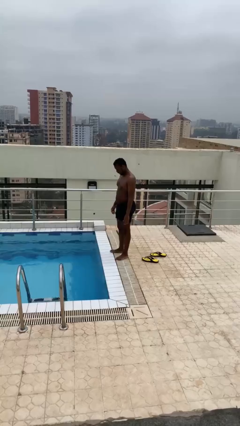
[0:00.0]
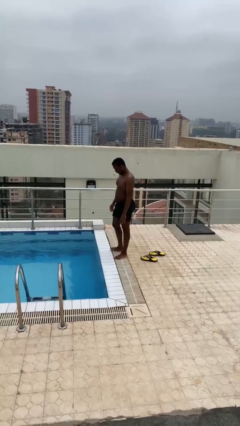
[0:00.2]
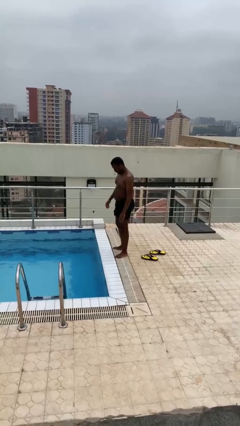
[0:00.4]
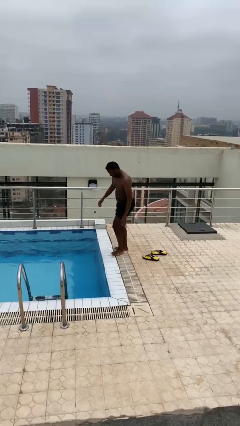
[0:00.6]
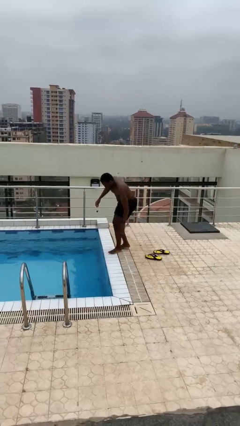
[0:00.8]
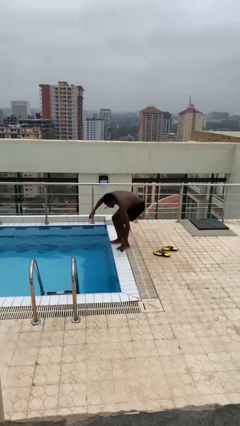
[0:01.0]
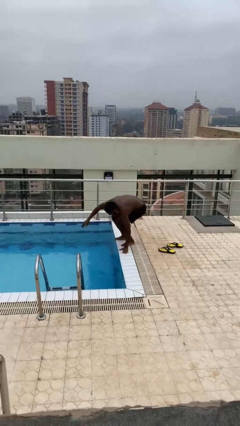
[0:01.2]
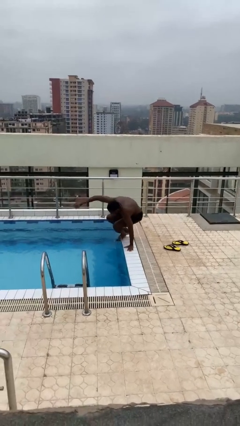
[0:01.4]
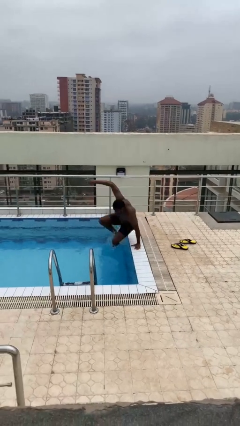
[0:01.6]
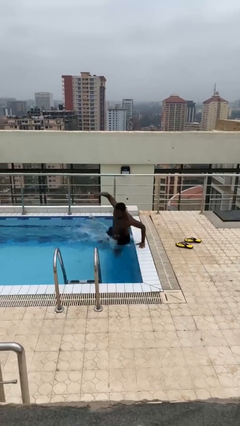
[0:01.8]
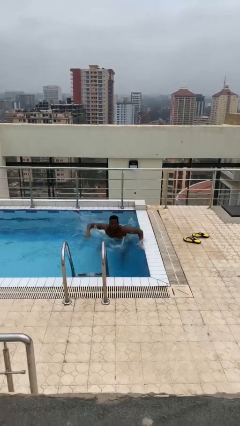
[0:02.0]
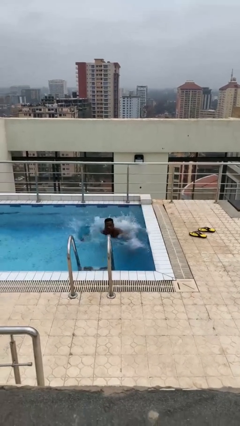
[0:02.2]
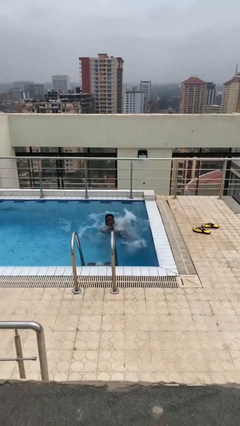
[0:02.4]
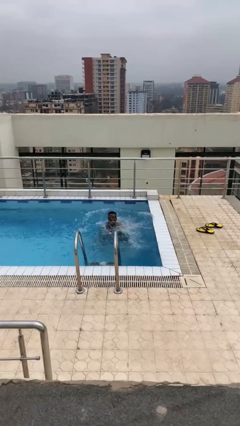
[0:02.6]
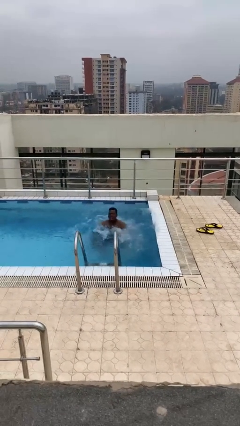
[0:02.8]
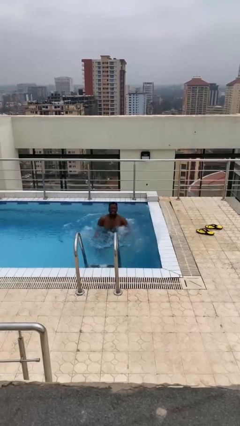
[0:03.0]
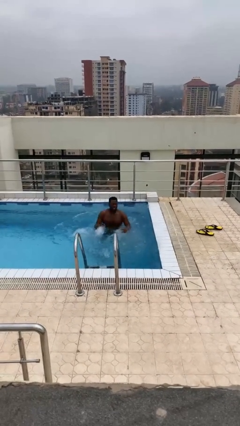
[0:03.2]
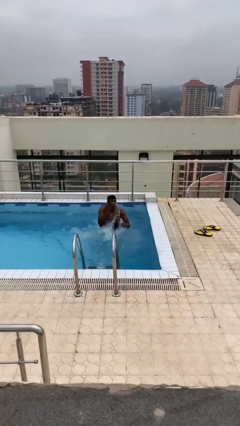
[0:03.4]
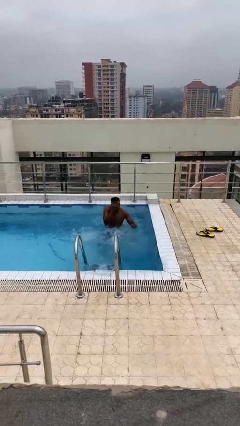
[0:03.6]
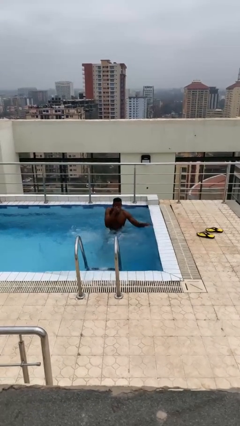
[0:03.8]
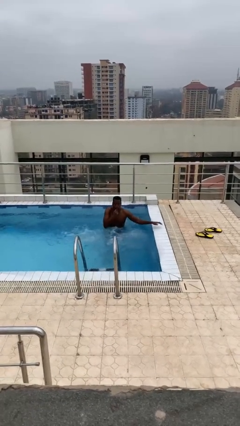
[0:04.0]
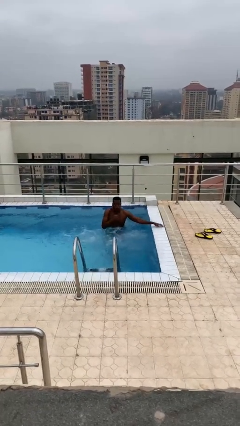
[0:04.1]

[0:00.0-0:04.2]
person jumps into pool

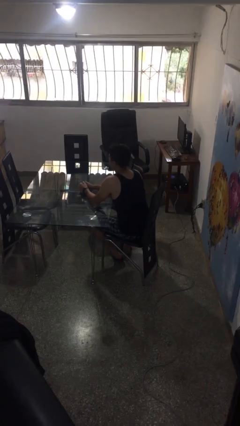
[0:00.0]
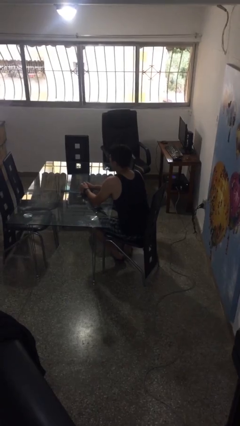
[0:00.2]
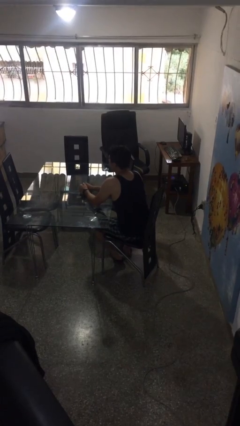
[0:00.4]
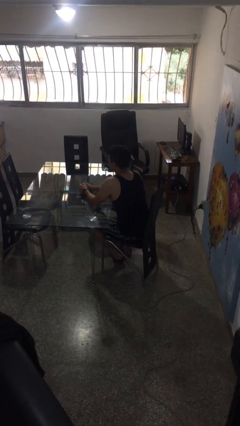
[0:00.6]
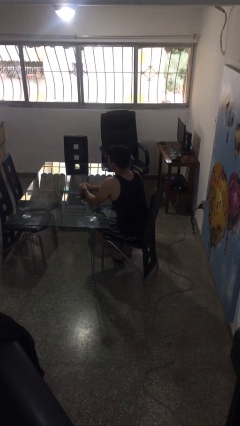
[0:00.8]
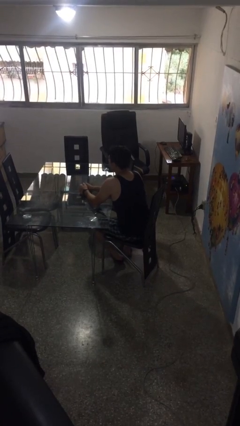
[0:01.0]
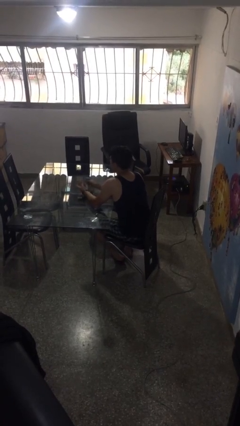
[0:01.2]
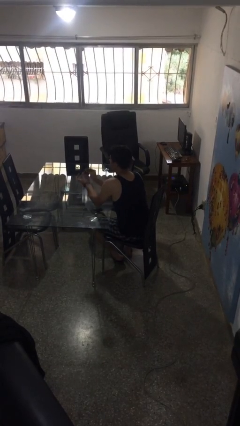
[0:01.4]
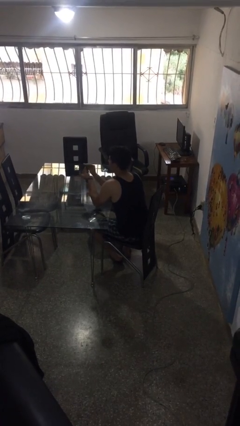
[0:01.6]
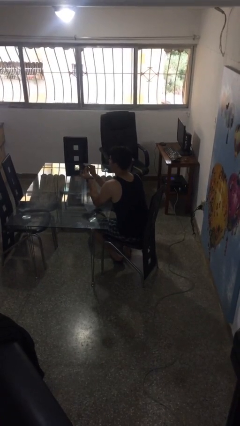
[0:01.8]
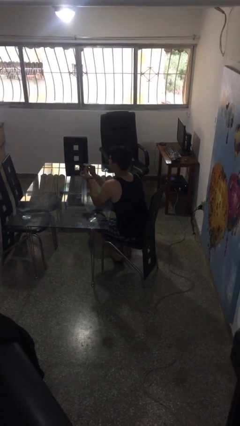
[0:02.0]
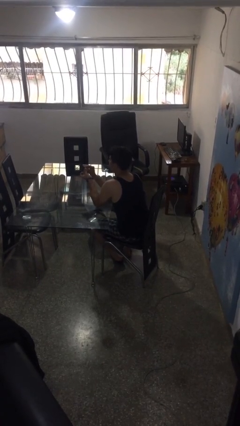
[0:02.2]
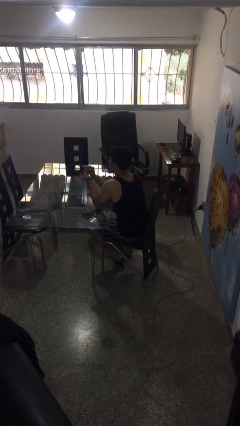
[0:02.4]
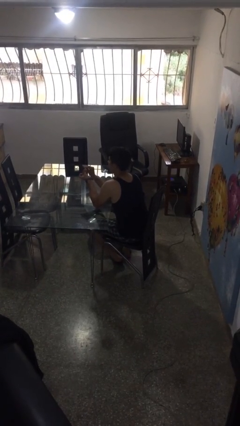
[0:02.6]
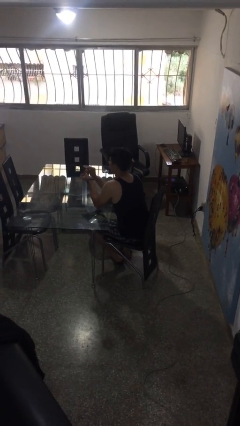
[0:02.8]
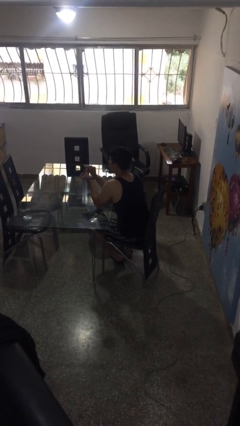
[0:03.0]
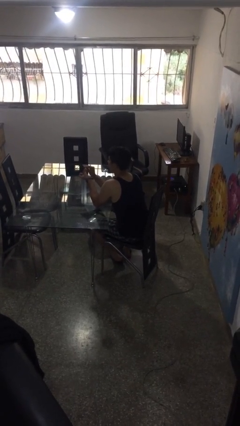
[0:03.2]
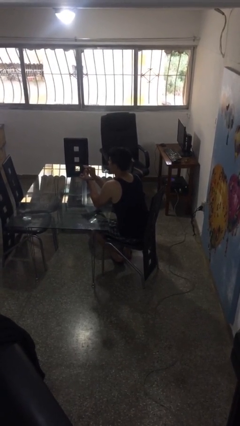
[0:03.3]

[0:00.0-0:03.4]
person files fingernails

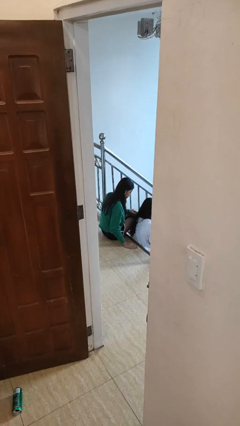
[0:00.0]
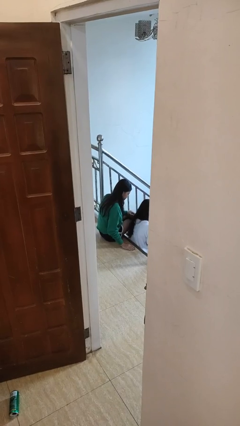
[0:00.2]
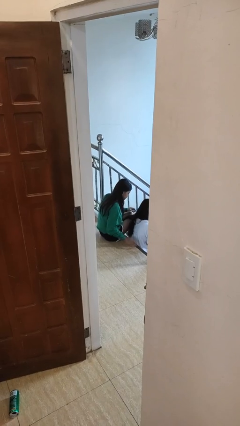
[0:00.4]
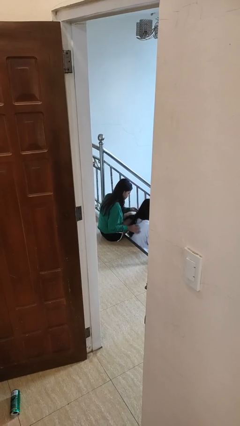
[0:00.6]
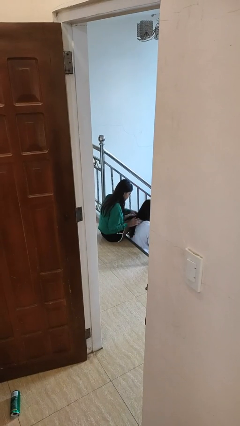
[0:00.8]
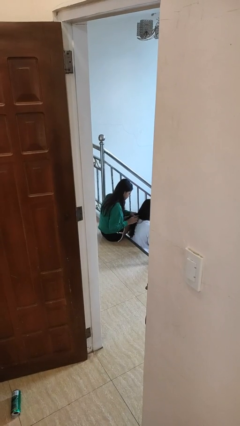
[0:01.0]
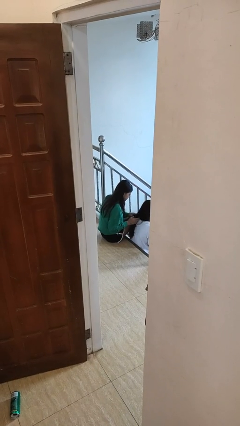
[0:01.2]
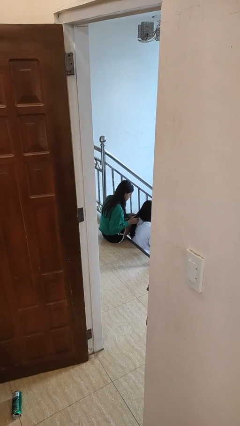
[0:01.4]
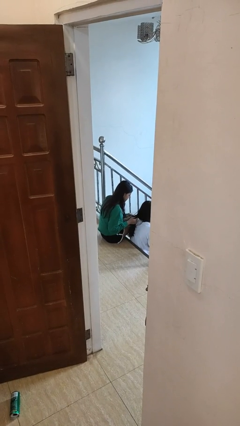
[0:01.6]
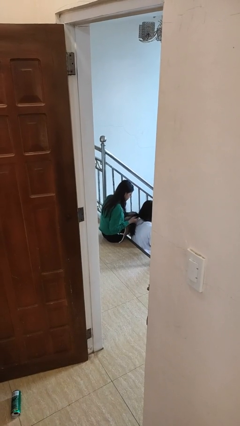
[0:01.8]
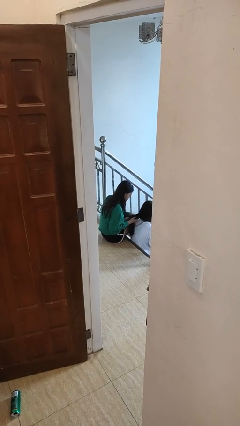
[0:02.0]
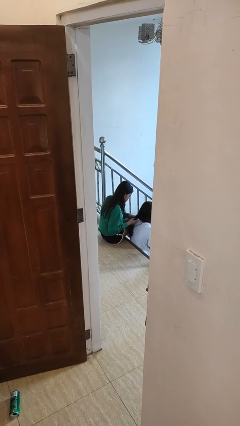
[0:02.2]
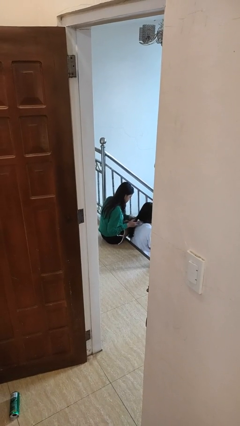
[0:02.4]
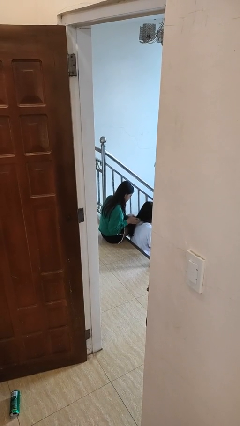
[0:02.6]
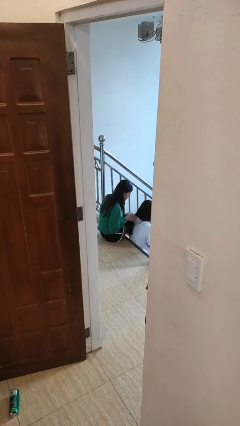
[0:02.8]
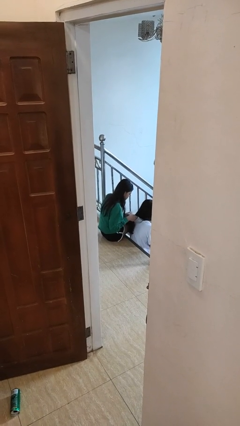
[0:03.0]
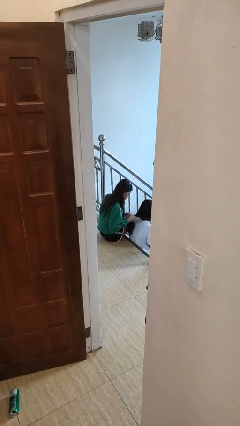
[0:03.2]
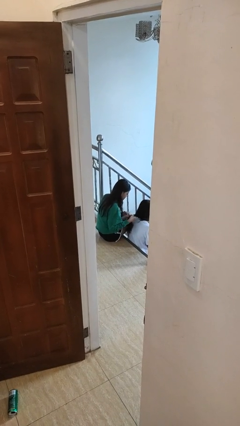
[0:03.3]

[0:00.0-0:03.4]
person braids hair of person

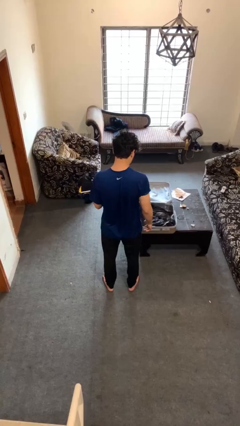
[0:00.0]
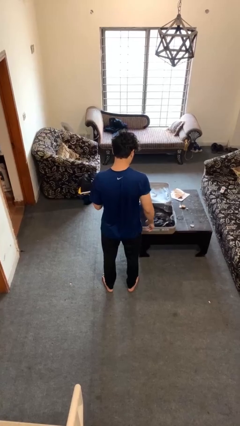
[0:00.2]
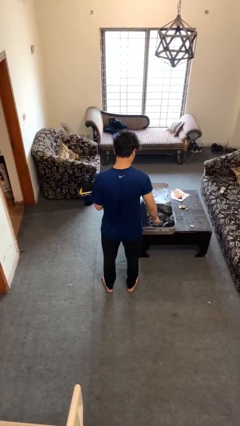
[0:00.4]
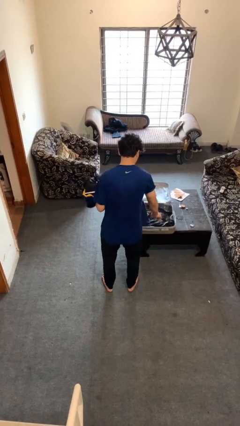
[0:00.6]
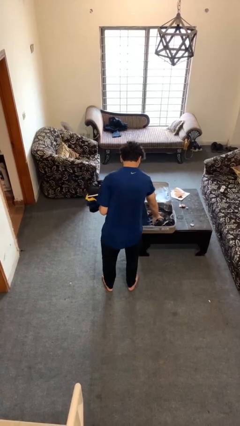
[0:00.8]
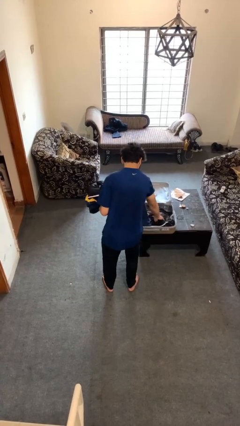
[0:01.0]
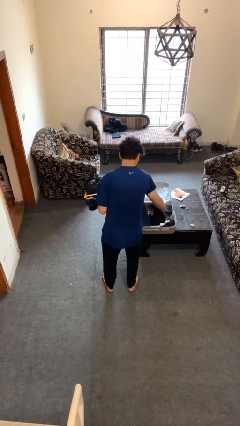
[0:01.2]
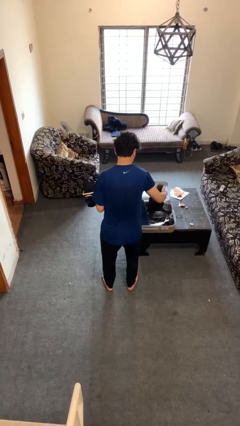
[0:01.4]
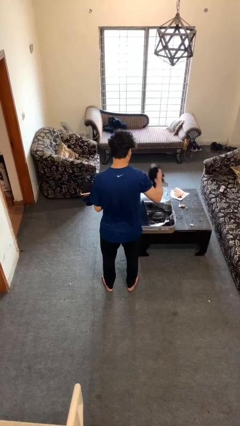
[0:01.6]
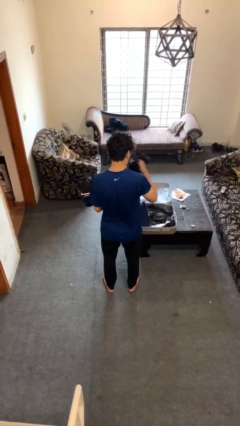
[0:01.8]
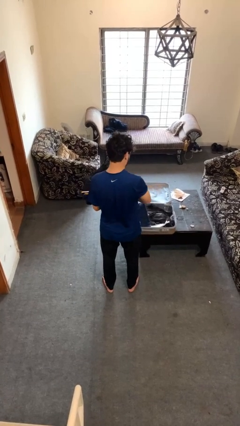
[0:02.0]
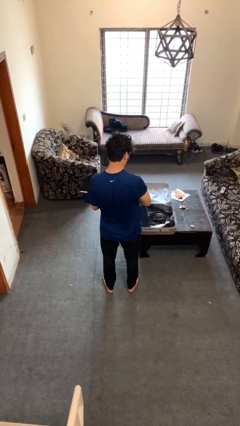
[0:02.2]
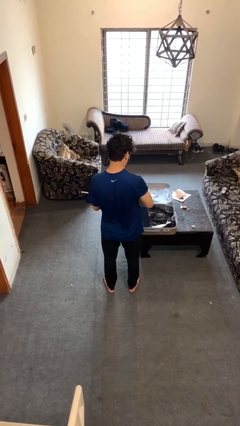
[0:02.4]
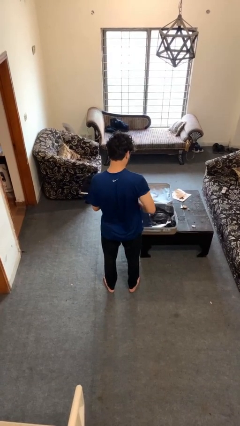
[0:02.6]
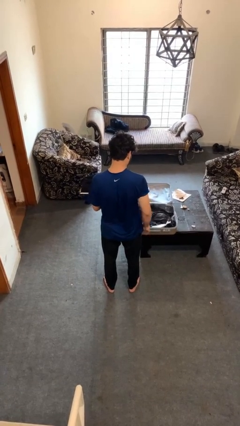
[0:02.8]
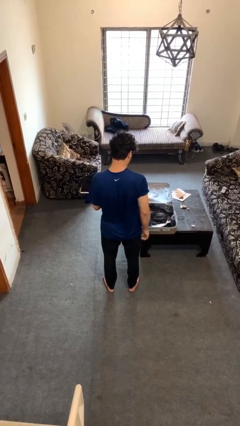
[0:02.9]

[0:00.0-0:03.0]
person unloads clothes from suitcase

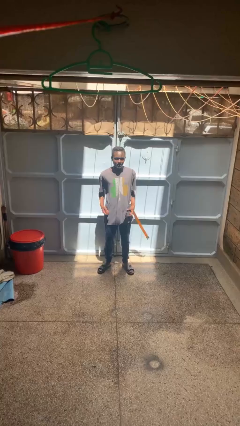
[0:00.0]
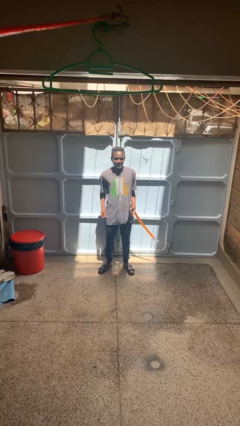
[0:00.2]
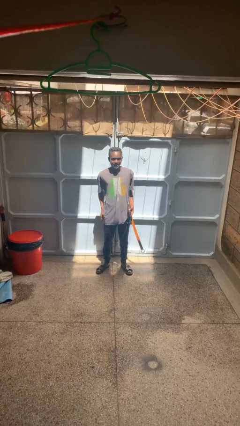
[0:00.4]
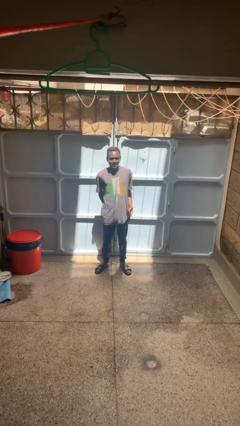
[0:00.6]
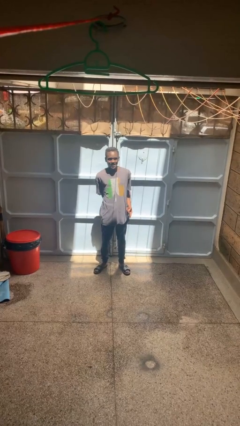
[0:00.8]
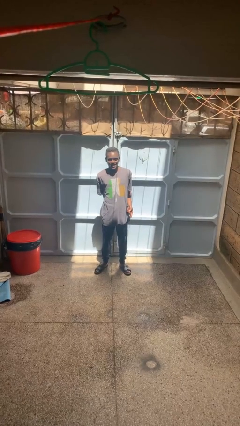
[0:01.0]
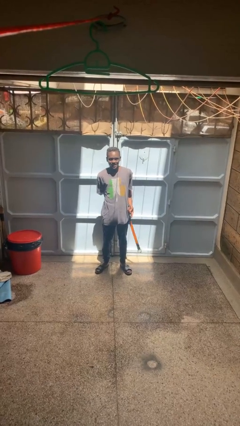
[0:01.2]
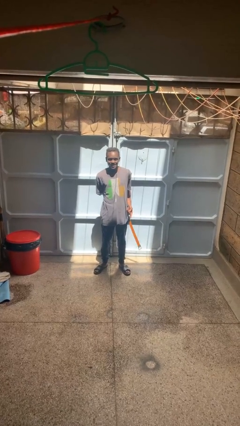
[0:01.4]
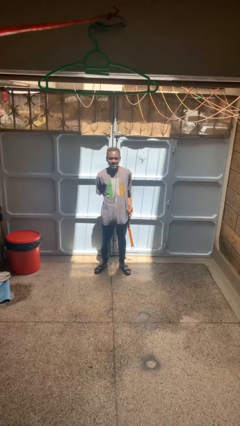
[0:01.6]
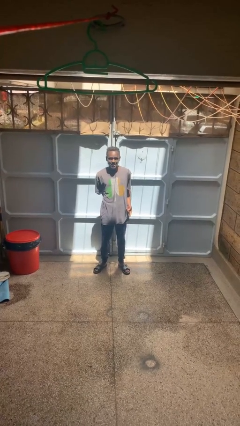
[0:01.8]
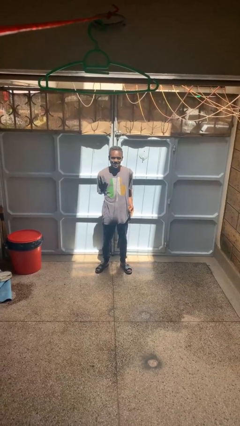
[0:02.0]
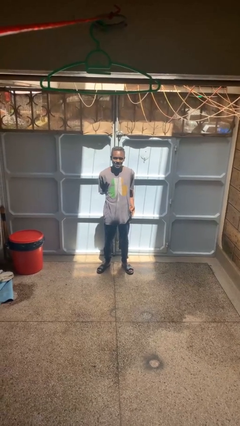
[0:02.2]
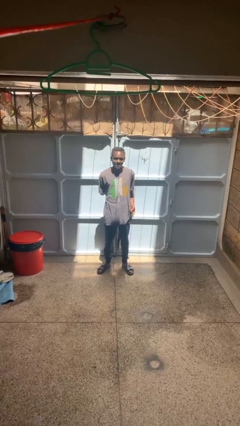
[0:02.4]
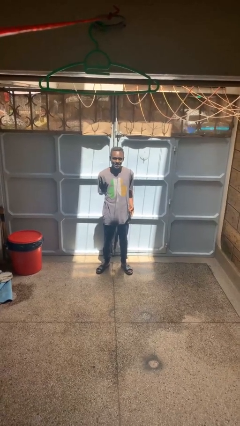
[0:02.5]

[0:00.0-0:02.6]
person takes off belt

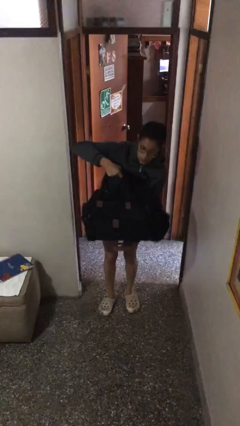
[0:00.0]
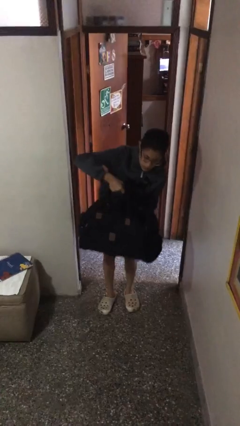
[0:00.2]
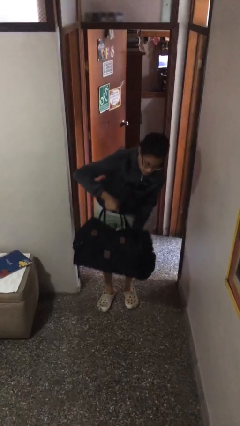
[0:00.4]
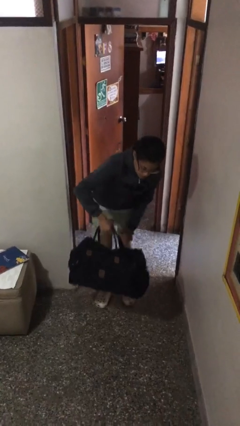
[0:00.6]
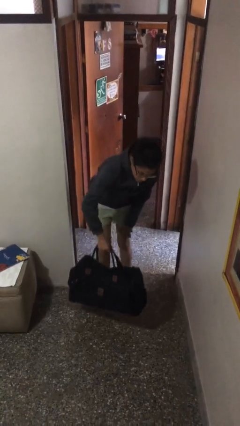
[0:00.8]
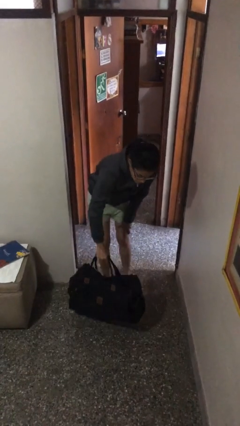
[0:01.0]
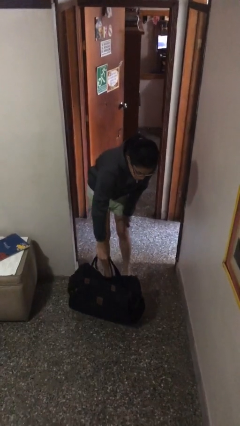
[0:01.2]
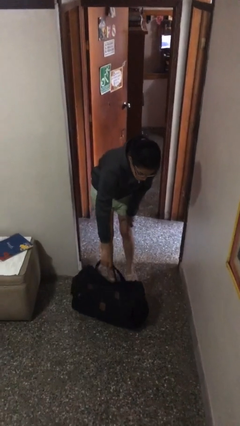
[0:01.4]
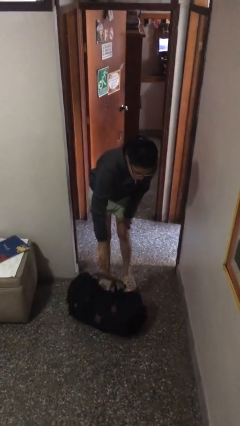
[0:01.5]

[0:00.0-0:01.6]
person puts down object on floor
